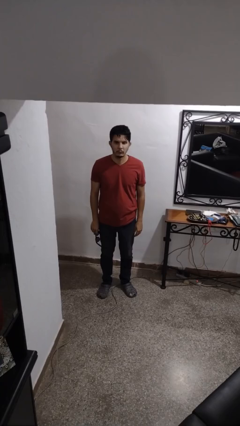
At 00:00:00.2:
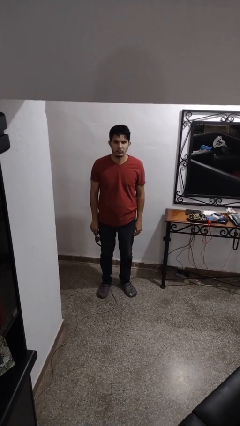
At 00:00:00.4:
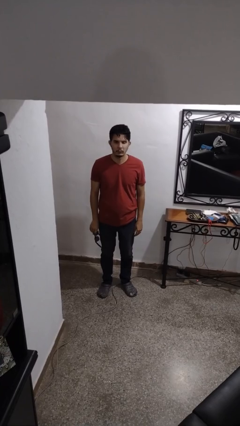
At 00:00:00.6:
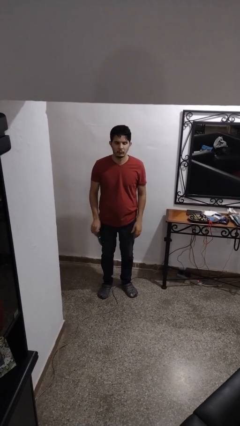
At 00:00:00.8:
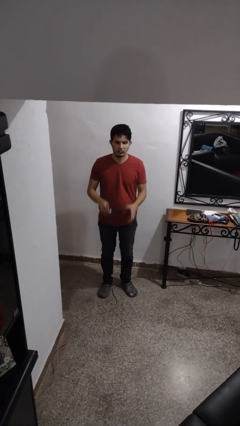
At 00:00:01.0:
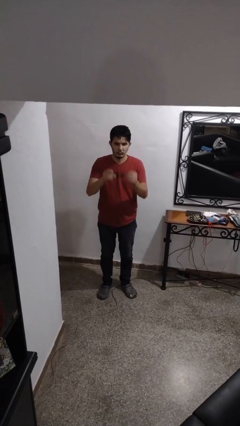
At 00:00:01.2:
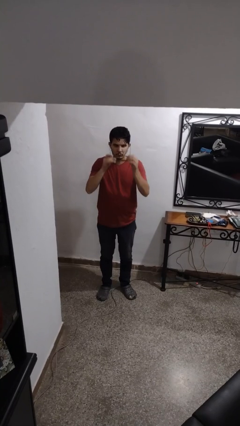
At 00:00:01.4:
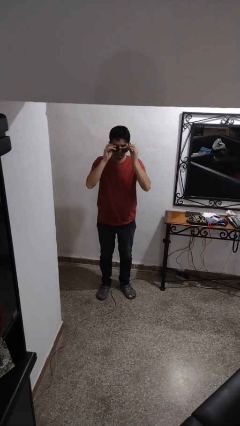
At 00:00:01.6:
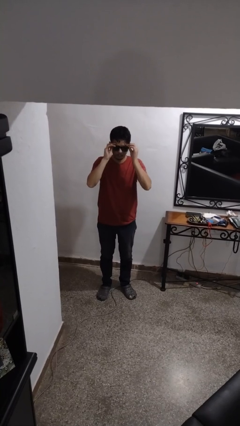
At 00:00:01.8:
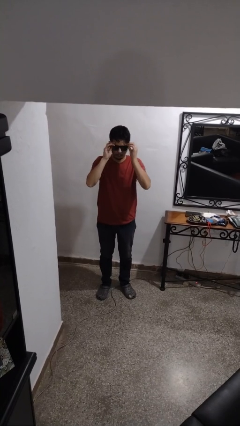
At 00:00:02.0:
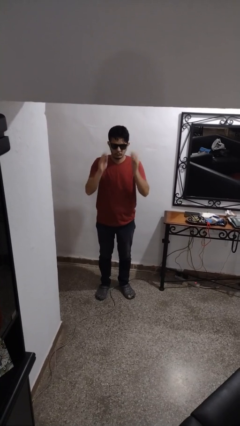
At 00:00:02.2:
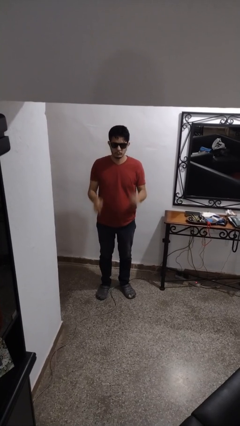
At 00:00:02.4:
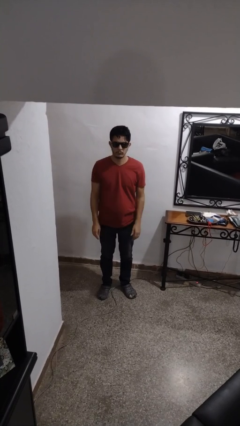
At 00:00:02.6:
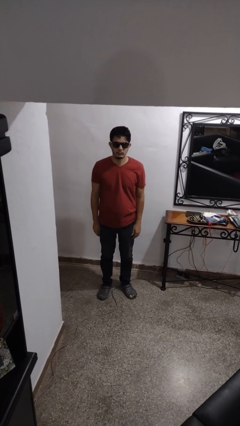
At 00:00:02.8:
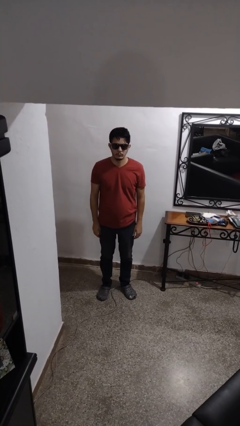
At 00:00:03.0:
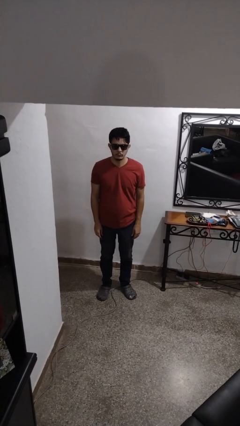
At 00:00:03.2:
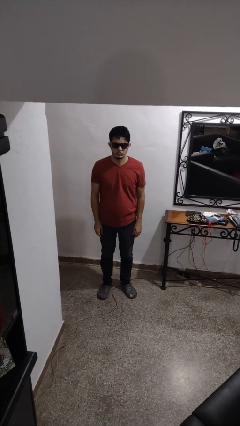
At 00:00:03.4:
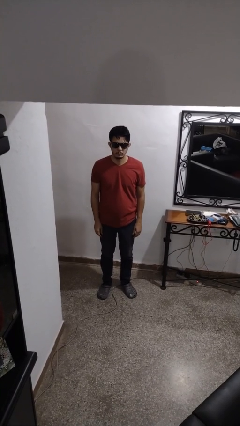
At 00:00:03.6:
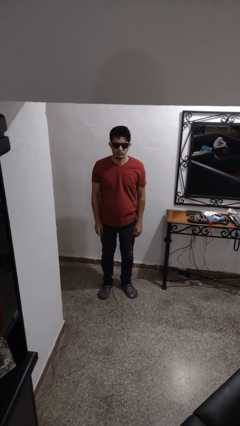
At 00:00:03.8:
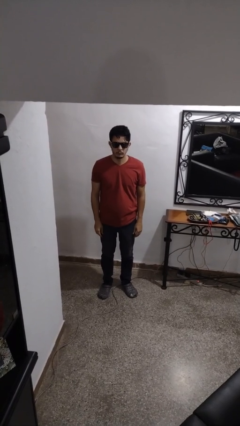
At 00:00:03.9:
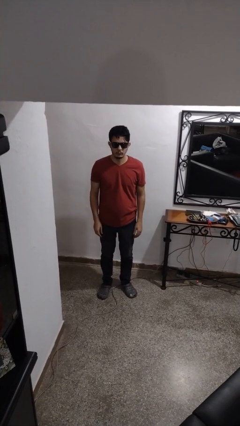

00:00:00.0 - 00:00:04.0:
person puts on sunglasses

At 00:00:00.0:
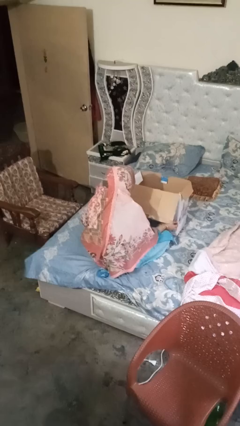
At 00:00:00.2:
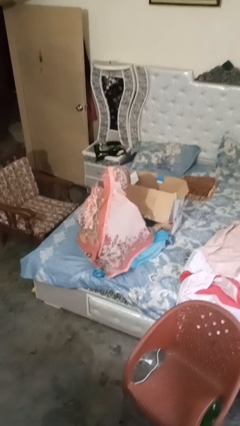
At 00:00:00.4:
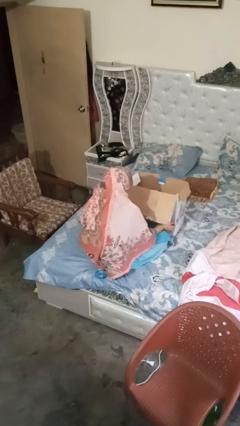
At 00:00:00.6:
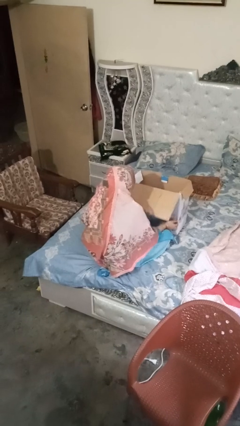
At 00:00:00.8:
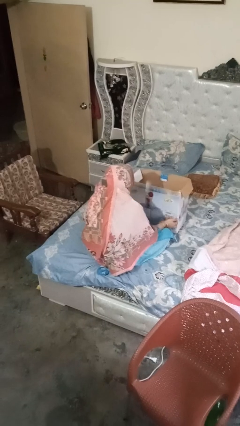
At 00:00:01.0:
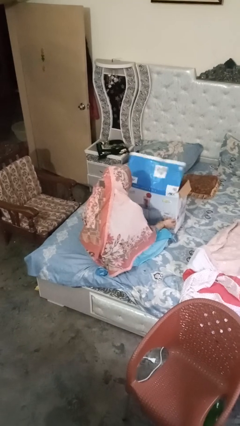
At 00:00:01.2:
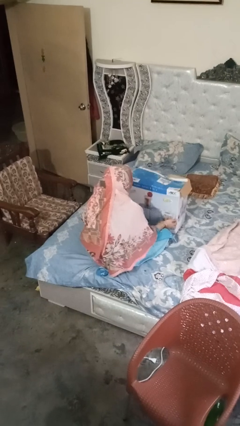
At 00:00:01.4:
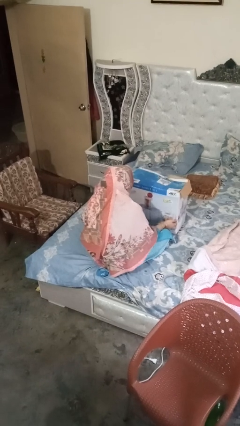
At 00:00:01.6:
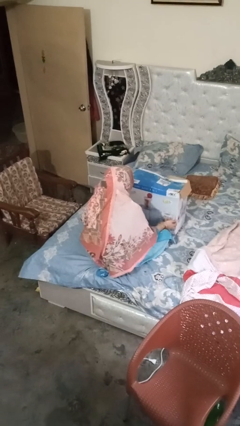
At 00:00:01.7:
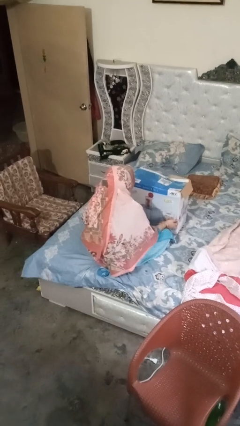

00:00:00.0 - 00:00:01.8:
person closes box

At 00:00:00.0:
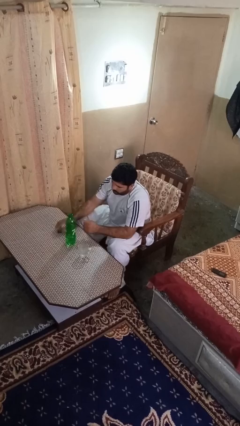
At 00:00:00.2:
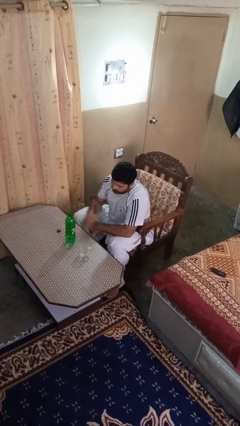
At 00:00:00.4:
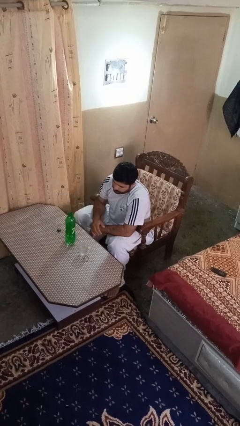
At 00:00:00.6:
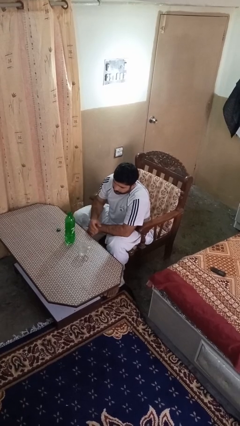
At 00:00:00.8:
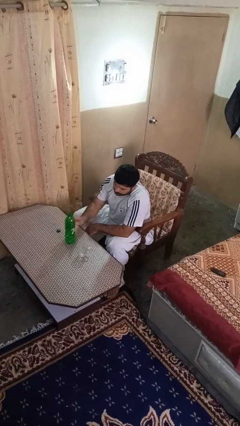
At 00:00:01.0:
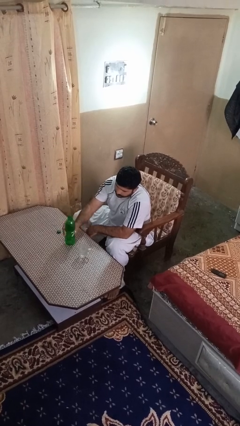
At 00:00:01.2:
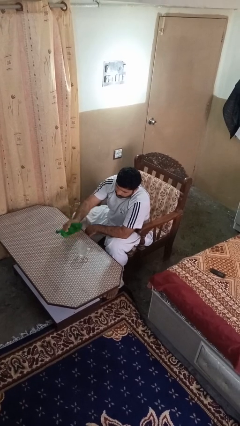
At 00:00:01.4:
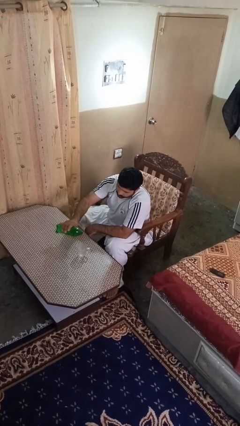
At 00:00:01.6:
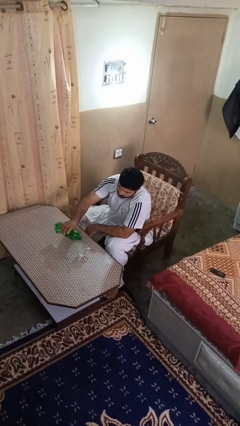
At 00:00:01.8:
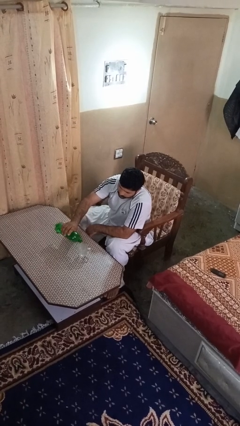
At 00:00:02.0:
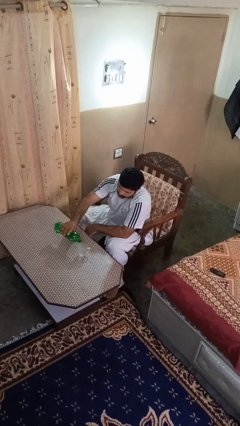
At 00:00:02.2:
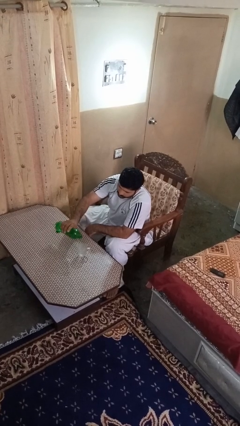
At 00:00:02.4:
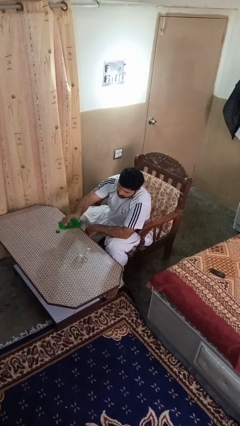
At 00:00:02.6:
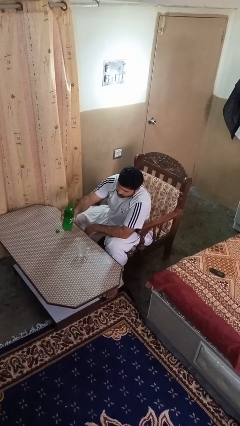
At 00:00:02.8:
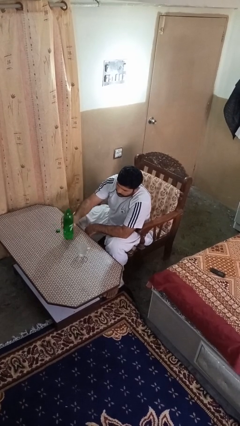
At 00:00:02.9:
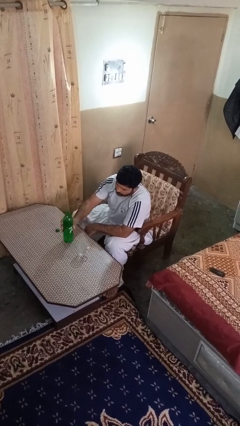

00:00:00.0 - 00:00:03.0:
person pours liquid into cup

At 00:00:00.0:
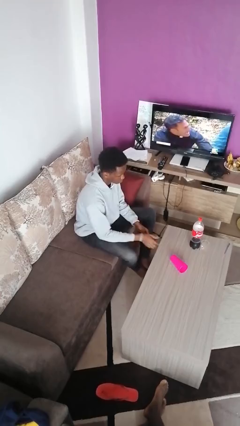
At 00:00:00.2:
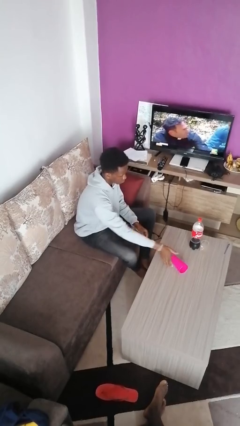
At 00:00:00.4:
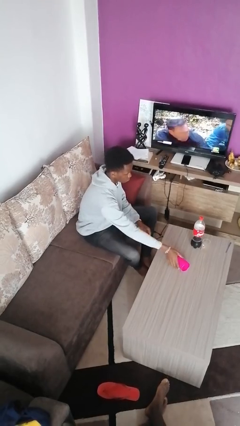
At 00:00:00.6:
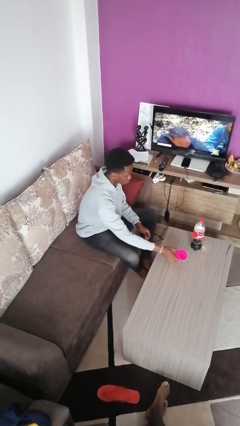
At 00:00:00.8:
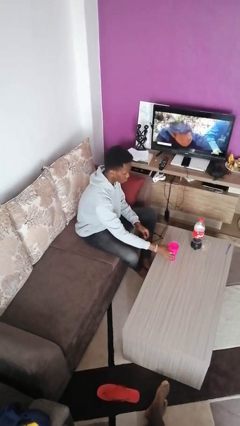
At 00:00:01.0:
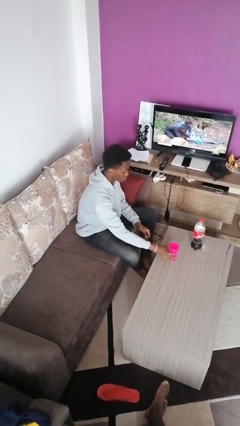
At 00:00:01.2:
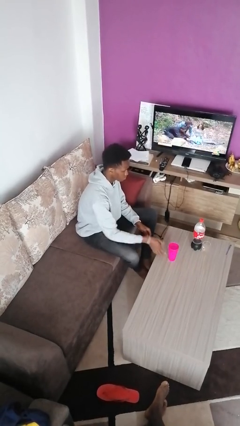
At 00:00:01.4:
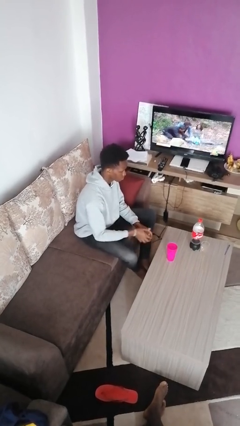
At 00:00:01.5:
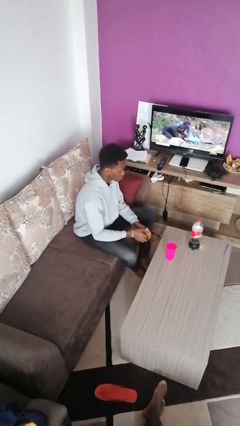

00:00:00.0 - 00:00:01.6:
person sets upright glass

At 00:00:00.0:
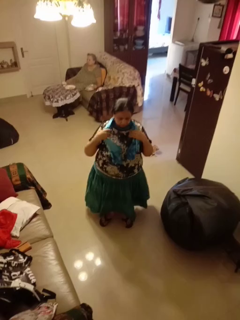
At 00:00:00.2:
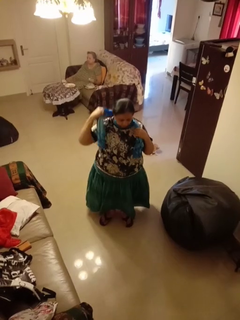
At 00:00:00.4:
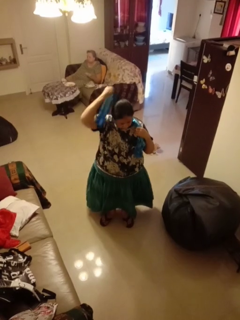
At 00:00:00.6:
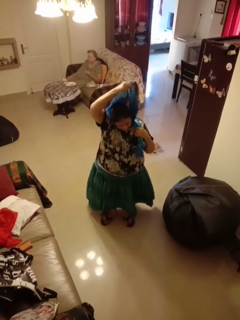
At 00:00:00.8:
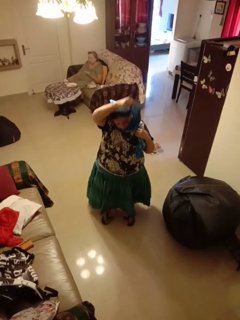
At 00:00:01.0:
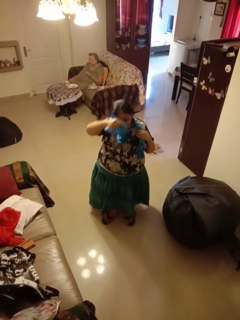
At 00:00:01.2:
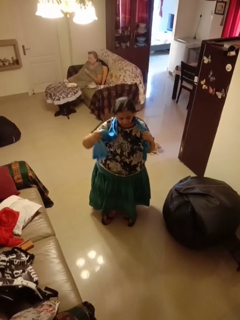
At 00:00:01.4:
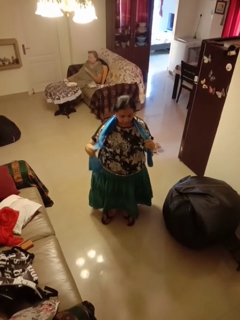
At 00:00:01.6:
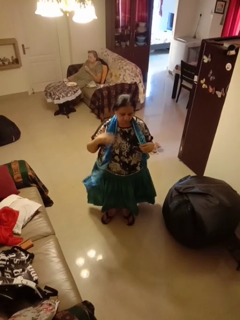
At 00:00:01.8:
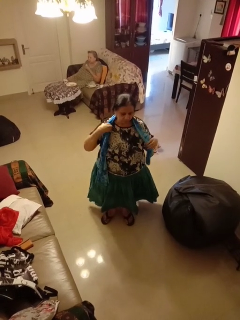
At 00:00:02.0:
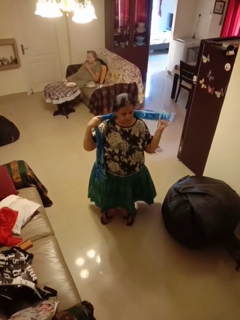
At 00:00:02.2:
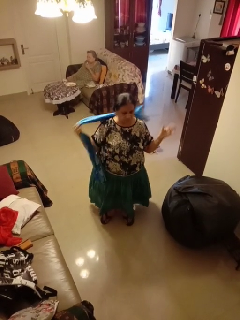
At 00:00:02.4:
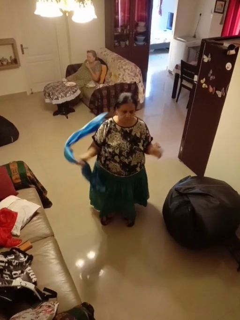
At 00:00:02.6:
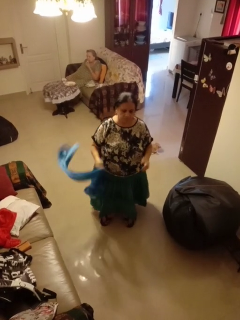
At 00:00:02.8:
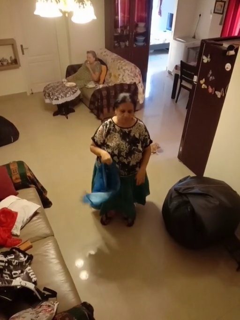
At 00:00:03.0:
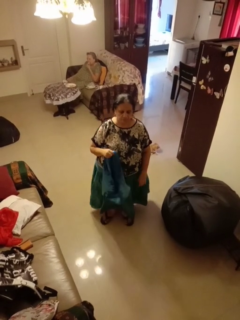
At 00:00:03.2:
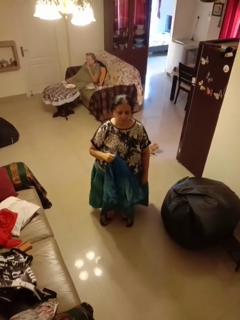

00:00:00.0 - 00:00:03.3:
person takes off scarf

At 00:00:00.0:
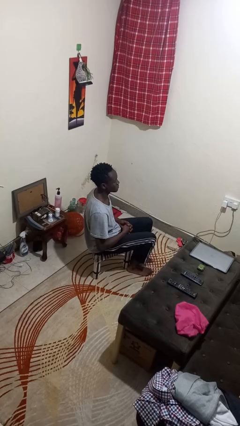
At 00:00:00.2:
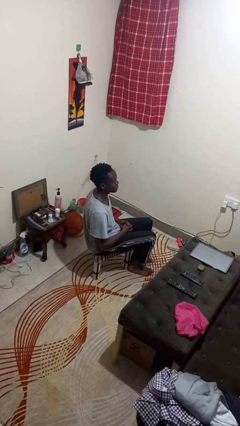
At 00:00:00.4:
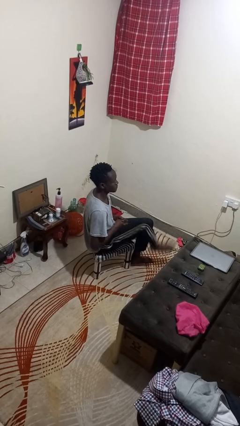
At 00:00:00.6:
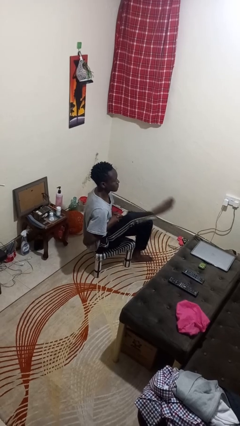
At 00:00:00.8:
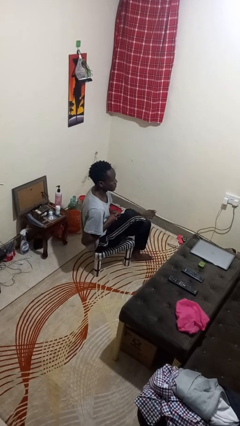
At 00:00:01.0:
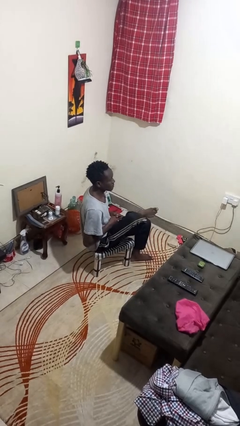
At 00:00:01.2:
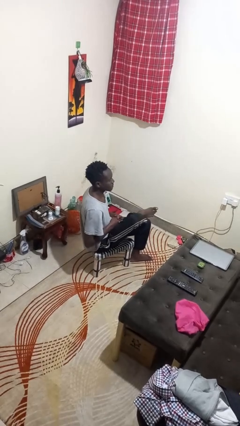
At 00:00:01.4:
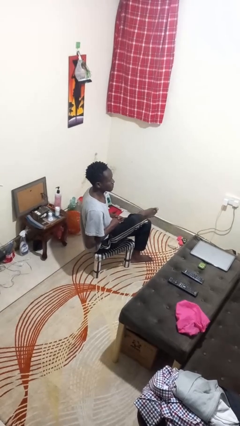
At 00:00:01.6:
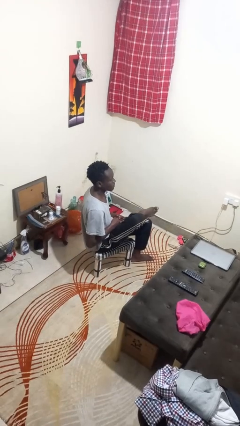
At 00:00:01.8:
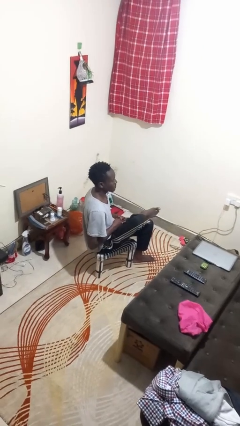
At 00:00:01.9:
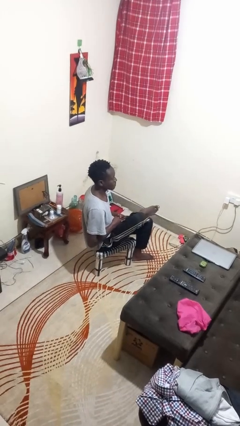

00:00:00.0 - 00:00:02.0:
person crosses legs

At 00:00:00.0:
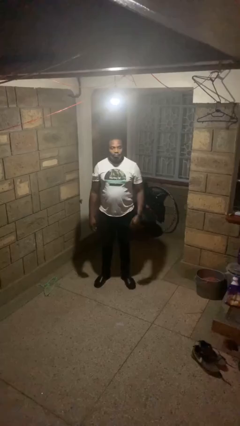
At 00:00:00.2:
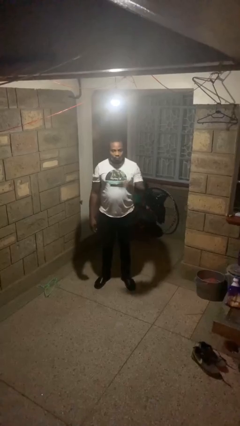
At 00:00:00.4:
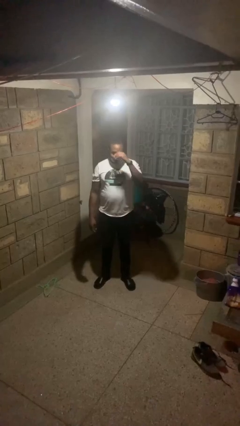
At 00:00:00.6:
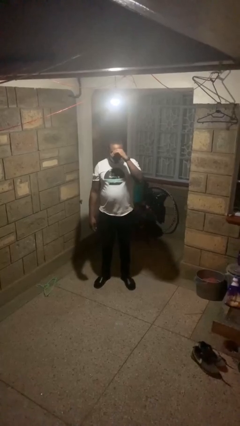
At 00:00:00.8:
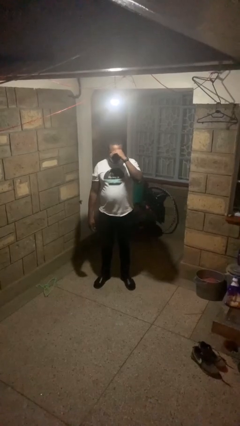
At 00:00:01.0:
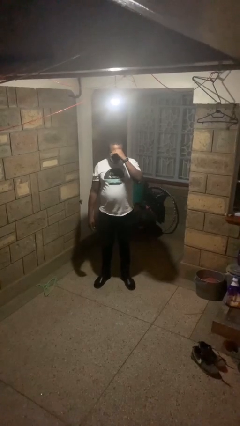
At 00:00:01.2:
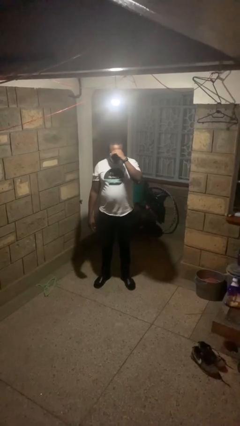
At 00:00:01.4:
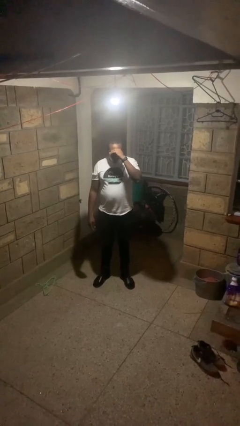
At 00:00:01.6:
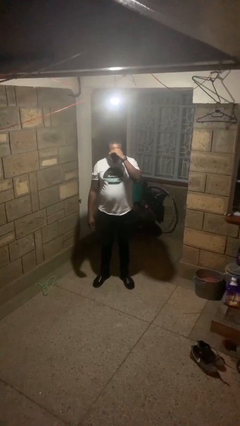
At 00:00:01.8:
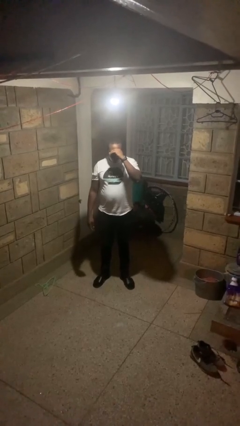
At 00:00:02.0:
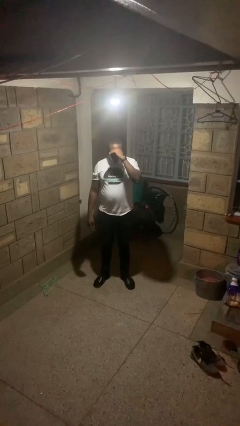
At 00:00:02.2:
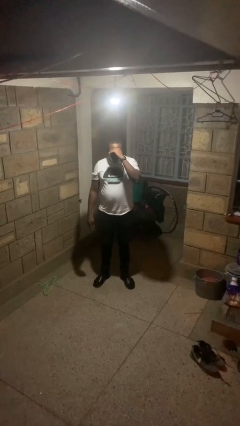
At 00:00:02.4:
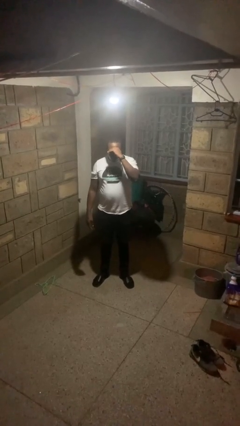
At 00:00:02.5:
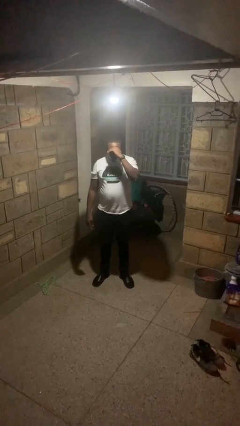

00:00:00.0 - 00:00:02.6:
person shades eyes
